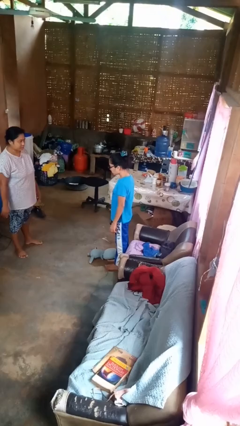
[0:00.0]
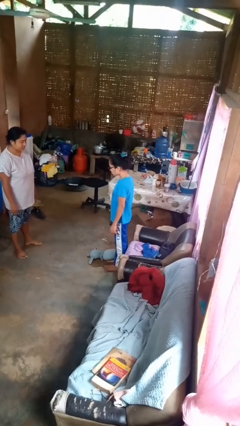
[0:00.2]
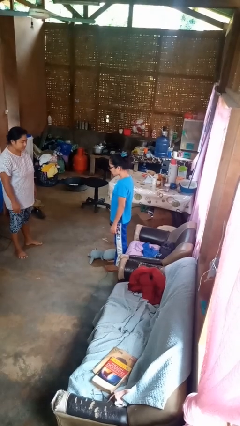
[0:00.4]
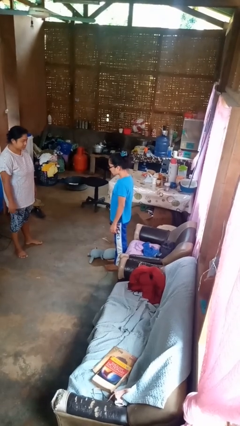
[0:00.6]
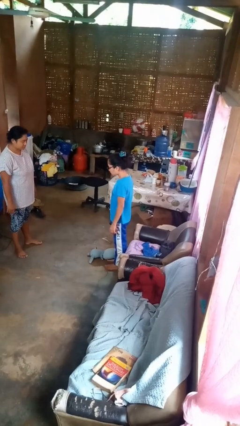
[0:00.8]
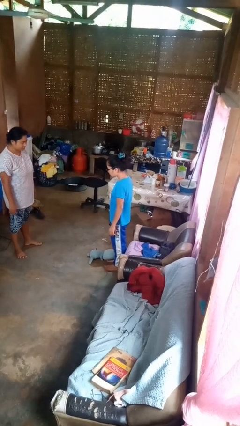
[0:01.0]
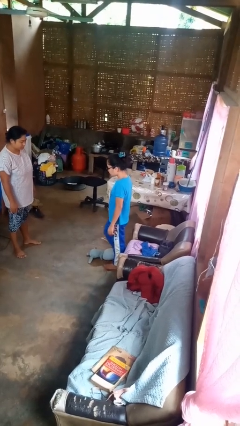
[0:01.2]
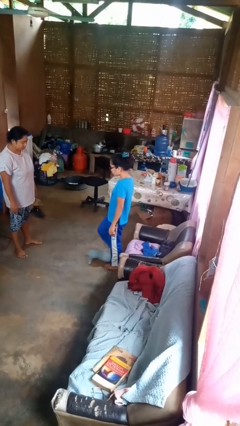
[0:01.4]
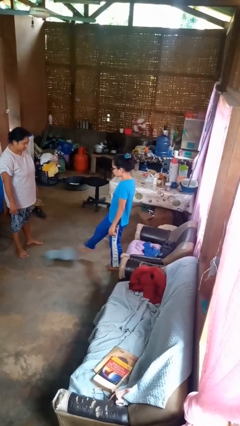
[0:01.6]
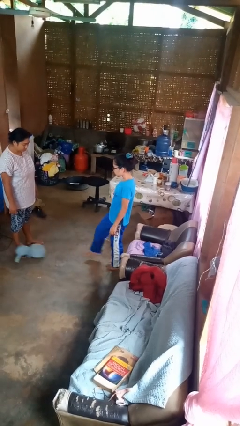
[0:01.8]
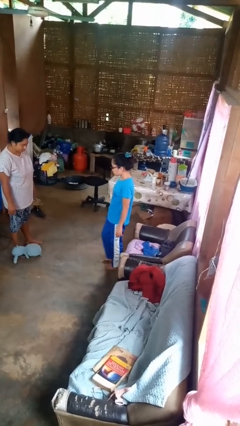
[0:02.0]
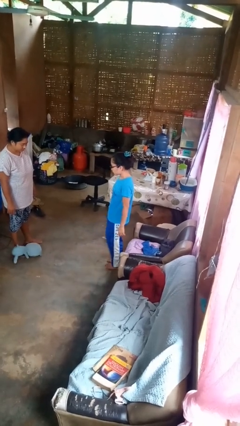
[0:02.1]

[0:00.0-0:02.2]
person kicks object to person

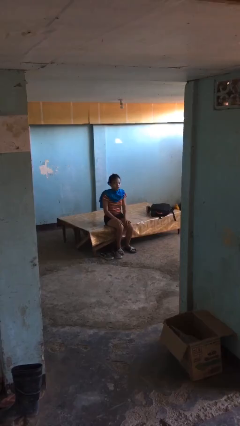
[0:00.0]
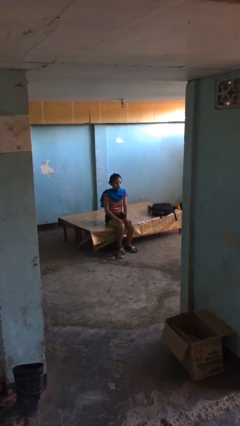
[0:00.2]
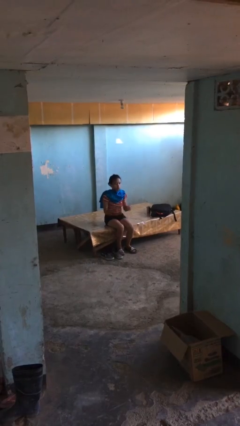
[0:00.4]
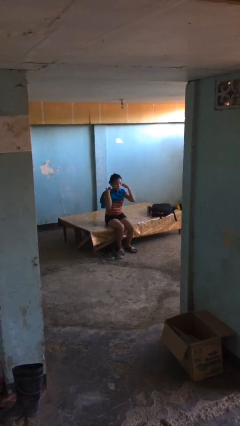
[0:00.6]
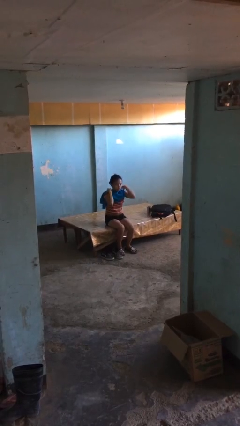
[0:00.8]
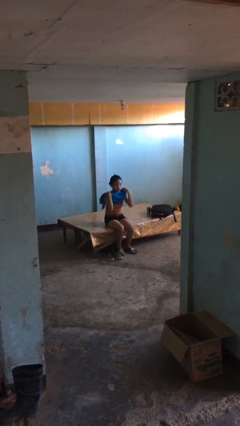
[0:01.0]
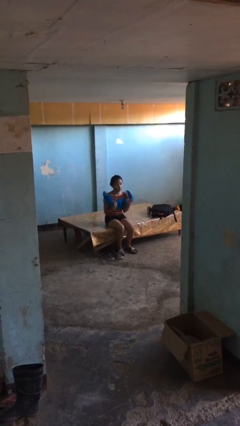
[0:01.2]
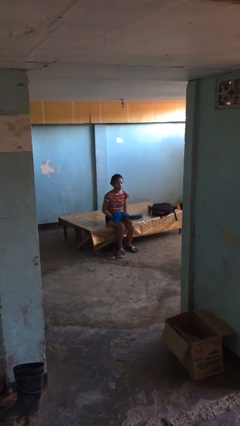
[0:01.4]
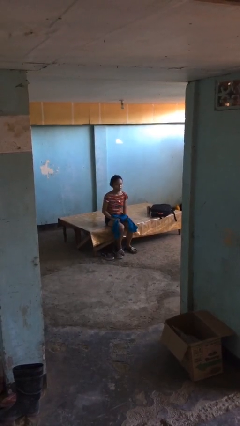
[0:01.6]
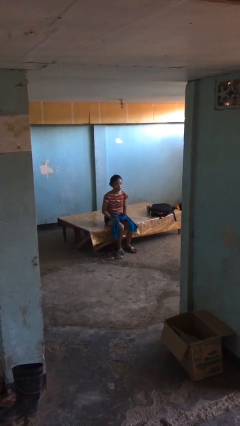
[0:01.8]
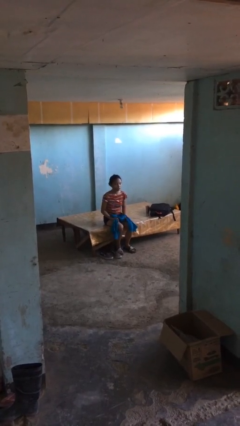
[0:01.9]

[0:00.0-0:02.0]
person takes off scarf

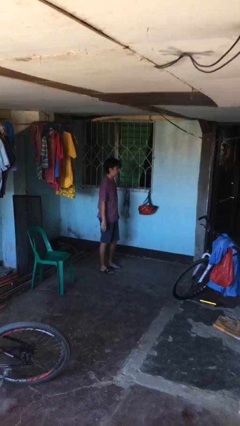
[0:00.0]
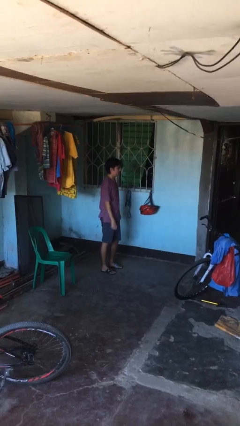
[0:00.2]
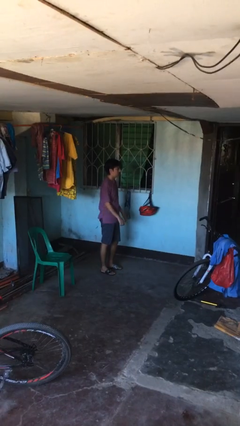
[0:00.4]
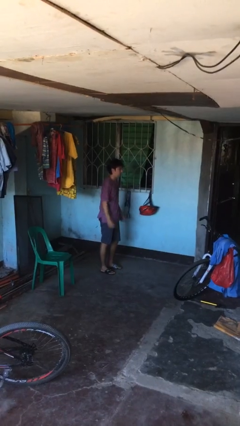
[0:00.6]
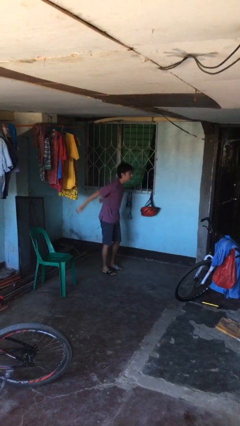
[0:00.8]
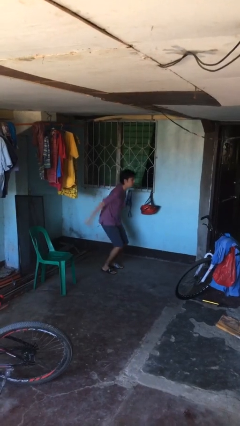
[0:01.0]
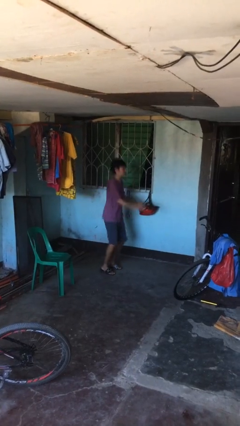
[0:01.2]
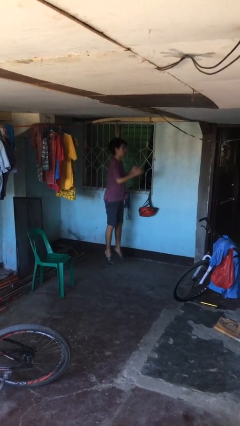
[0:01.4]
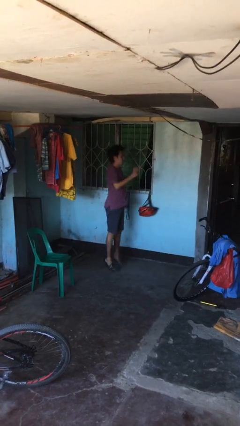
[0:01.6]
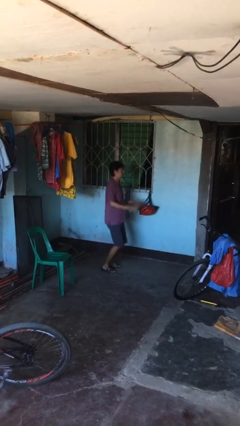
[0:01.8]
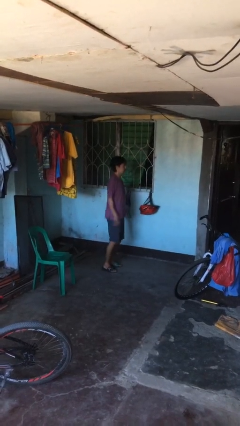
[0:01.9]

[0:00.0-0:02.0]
person jumps

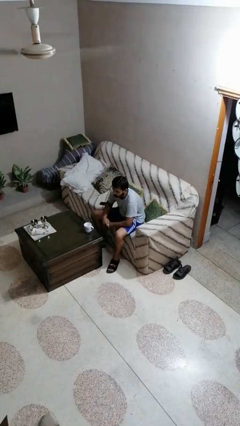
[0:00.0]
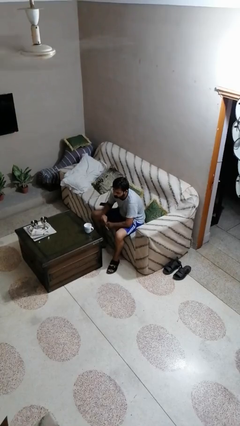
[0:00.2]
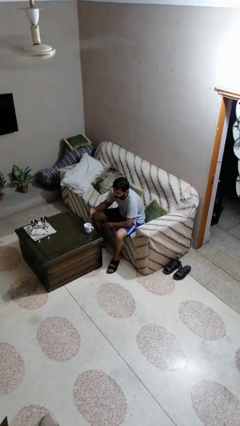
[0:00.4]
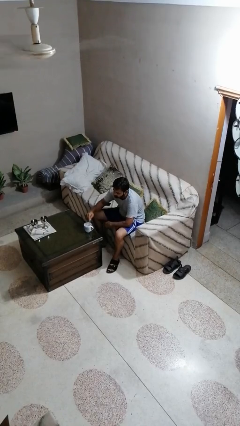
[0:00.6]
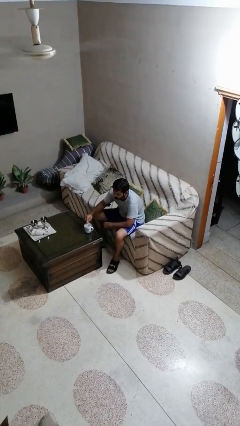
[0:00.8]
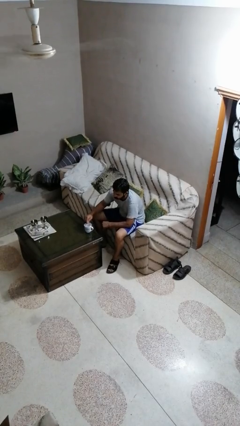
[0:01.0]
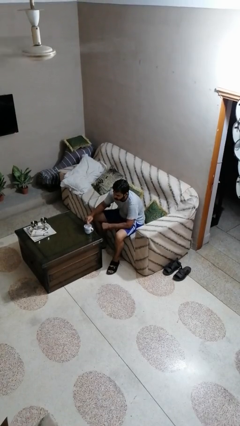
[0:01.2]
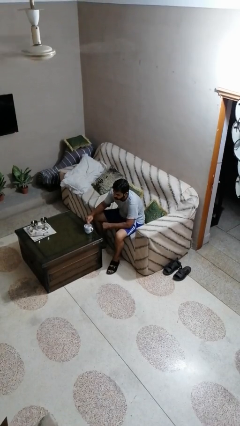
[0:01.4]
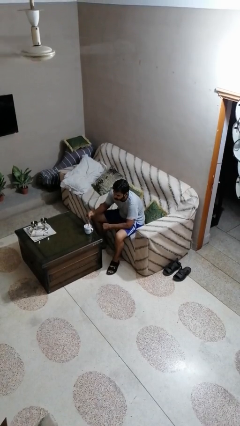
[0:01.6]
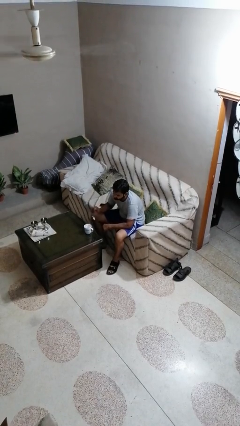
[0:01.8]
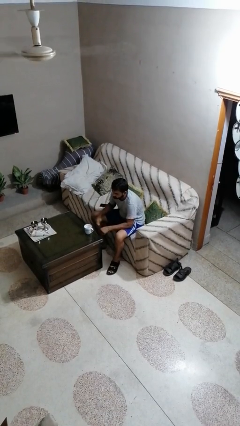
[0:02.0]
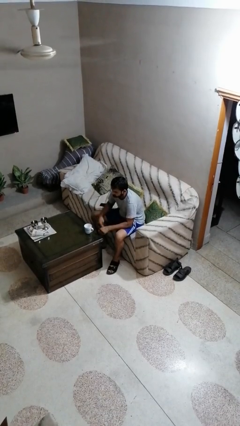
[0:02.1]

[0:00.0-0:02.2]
person stirs mug

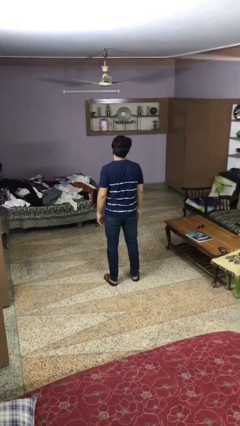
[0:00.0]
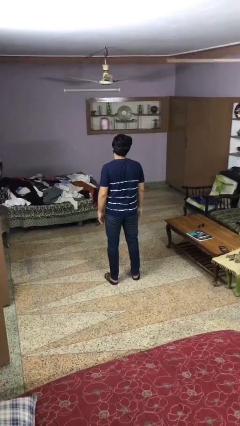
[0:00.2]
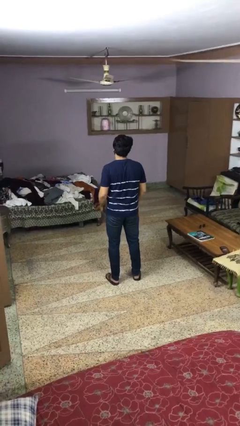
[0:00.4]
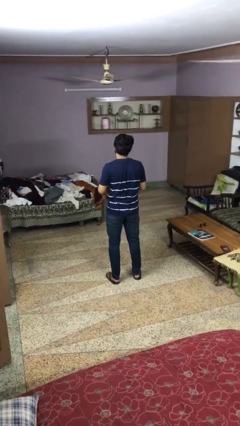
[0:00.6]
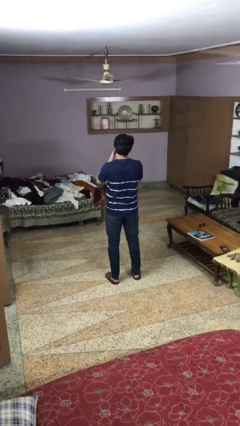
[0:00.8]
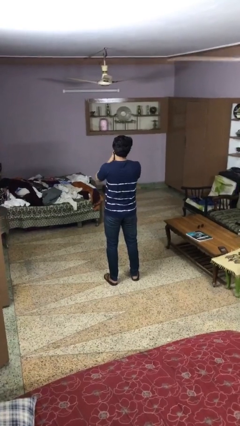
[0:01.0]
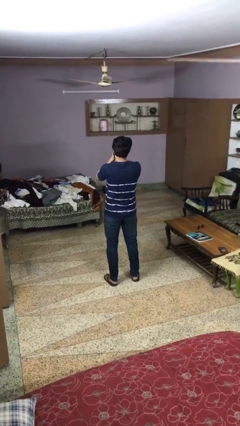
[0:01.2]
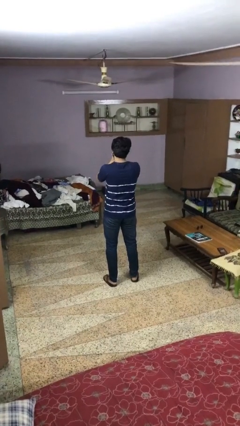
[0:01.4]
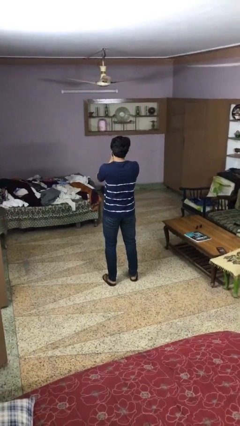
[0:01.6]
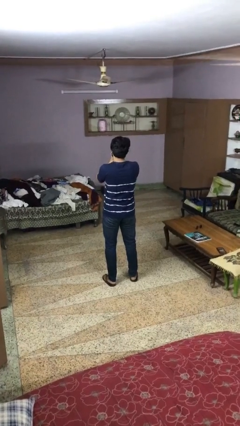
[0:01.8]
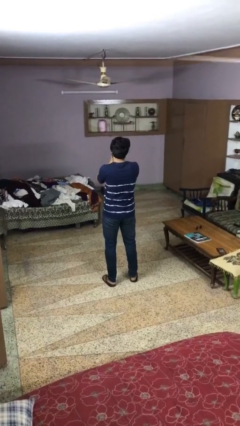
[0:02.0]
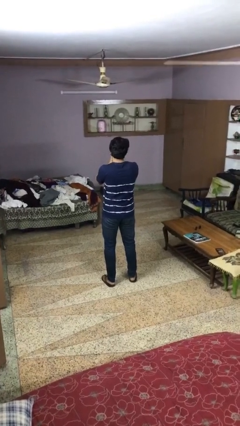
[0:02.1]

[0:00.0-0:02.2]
person covers face with hands

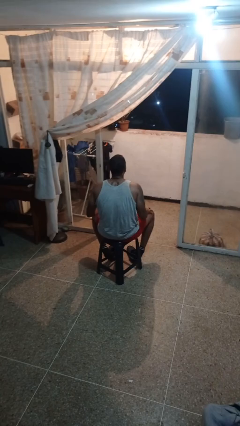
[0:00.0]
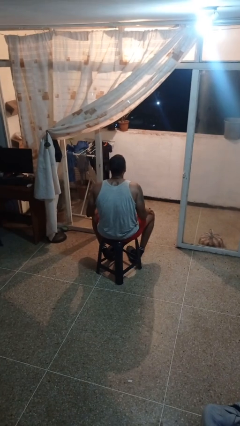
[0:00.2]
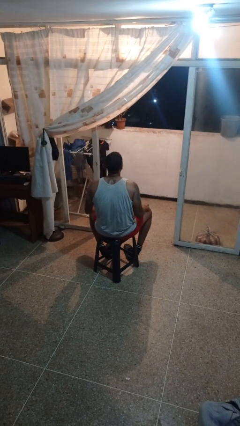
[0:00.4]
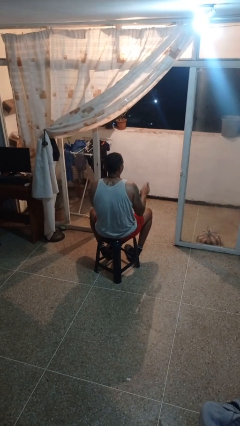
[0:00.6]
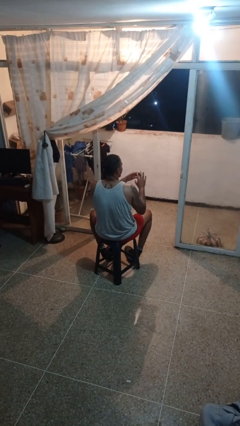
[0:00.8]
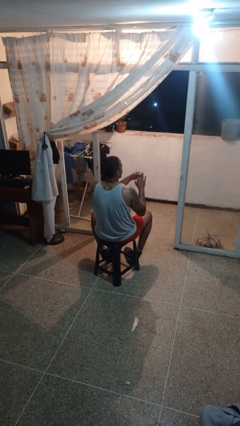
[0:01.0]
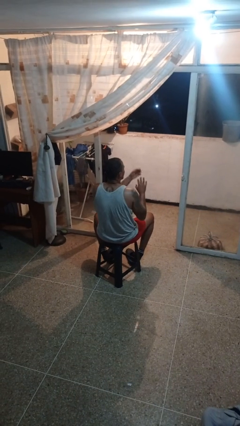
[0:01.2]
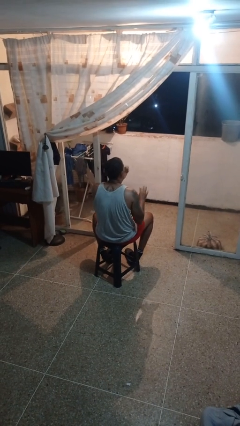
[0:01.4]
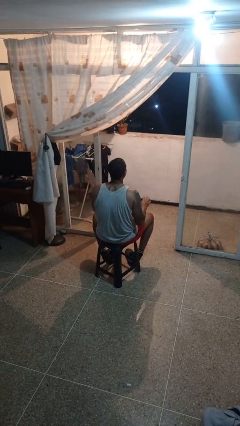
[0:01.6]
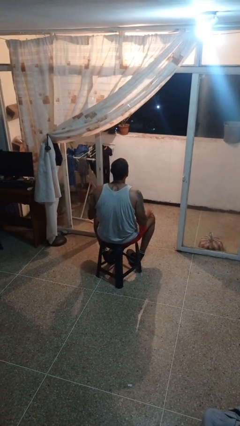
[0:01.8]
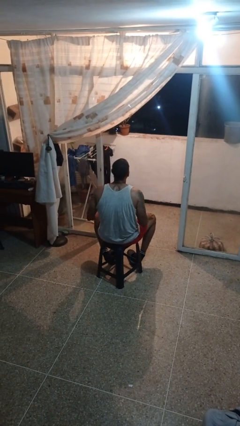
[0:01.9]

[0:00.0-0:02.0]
person takes off ring

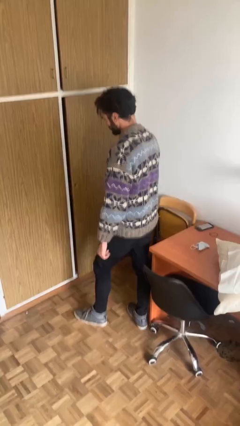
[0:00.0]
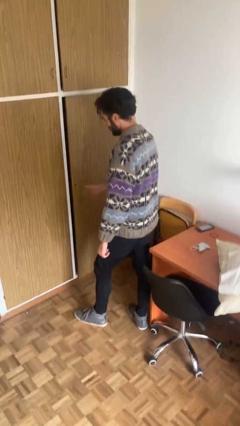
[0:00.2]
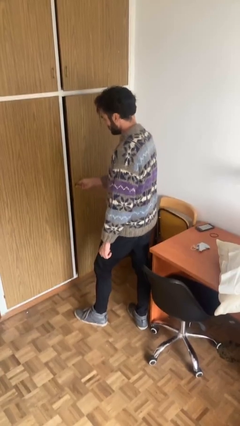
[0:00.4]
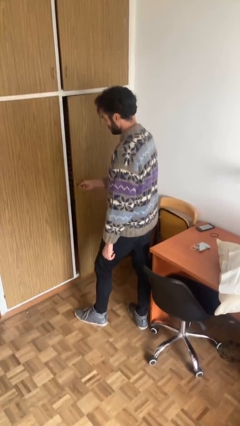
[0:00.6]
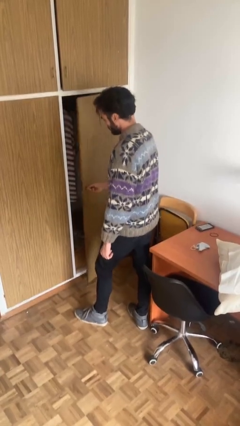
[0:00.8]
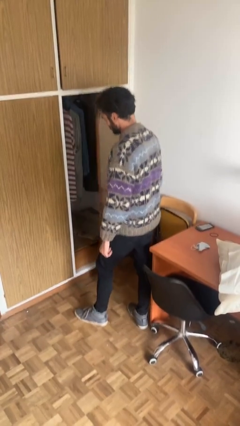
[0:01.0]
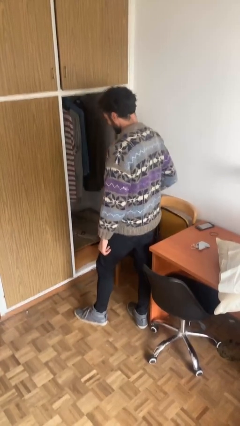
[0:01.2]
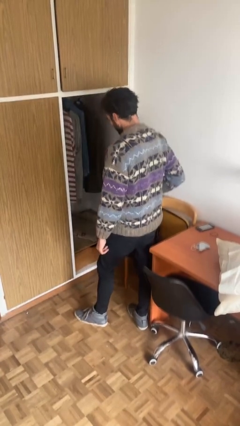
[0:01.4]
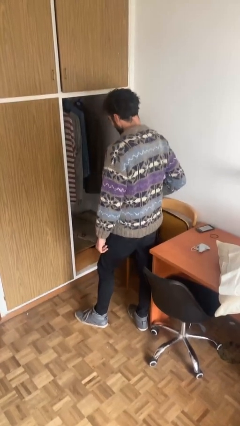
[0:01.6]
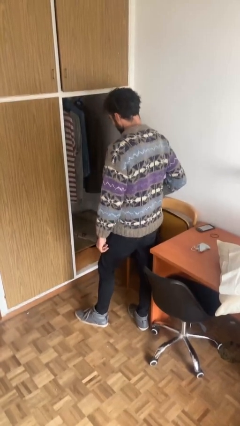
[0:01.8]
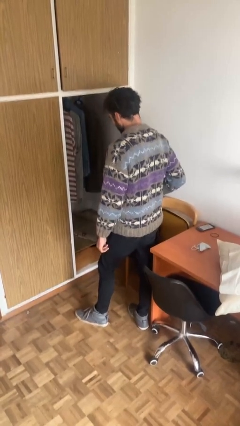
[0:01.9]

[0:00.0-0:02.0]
person opens closet door

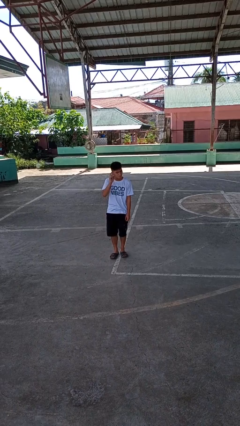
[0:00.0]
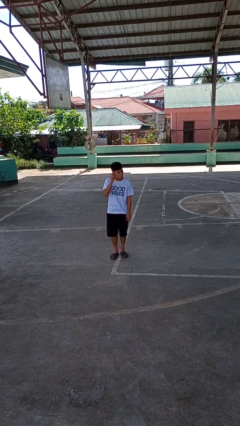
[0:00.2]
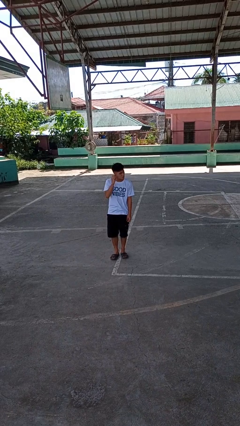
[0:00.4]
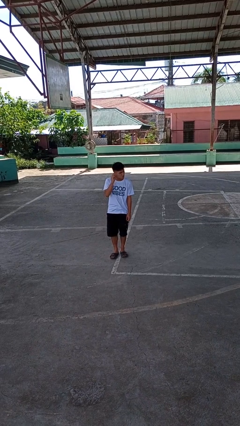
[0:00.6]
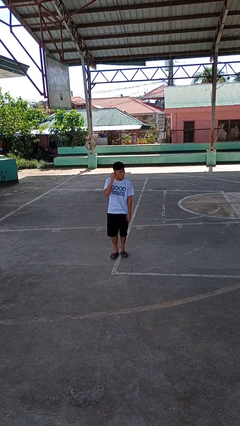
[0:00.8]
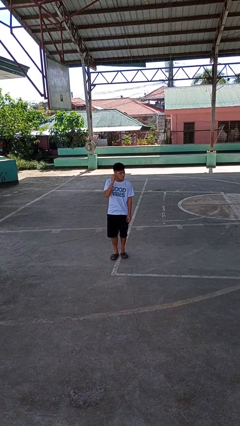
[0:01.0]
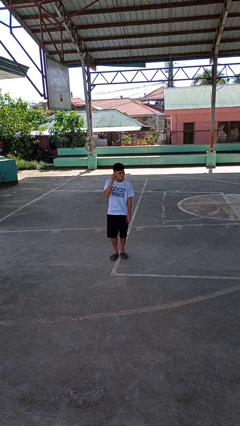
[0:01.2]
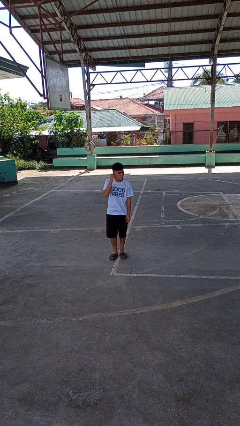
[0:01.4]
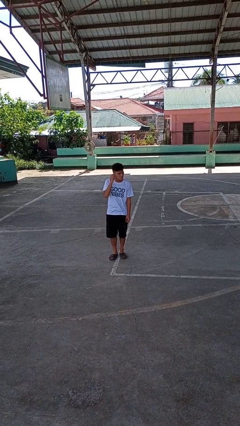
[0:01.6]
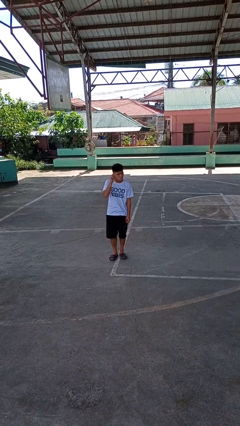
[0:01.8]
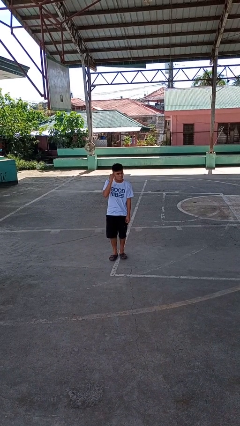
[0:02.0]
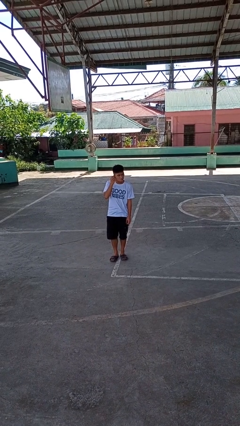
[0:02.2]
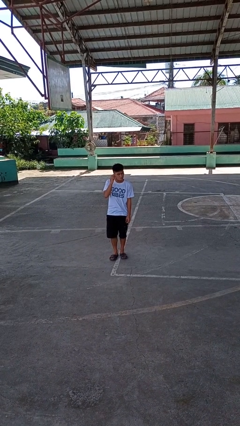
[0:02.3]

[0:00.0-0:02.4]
person touches earlobe
